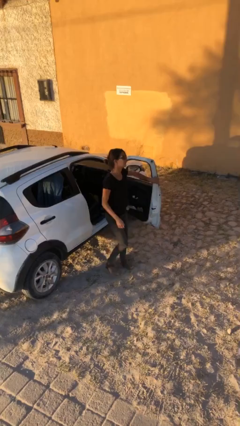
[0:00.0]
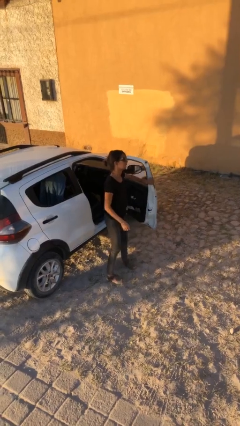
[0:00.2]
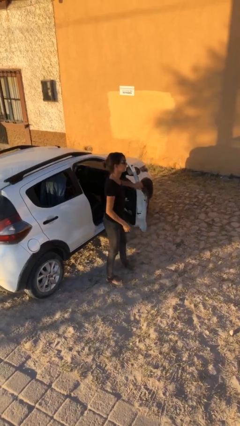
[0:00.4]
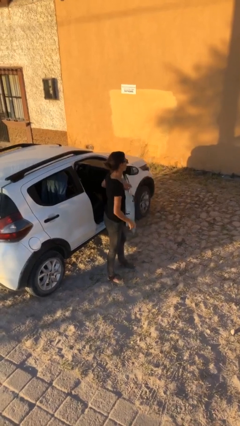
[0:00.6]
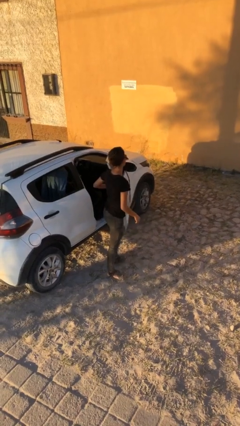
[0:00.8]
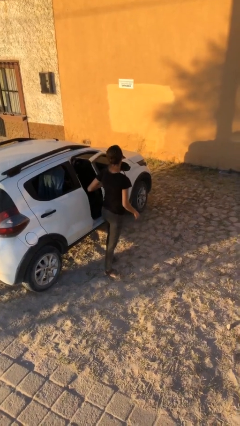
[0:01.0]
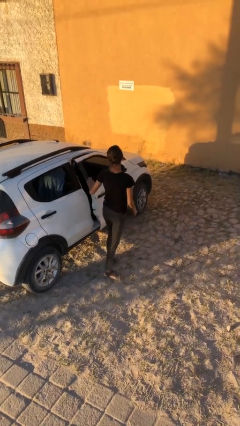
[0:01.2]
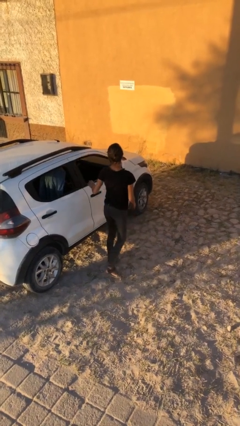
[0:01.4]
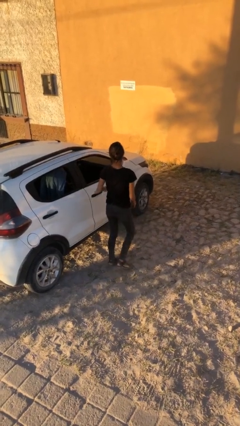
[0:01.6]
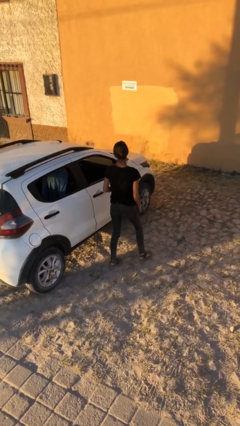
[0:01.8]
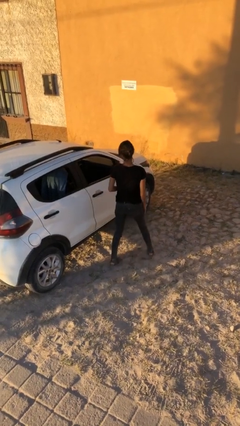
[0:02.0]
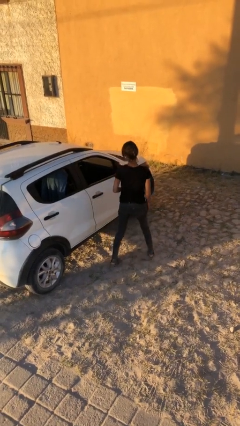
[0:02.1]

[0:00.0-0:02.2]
person closes car door

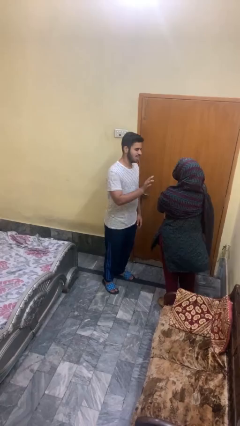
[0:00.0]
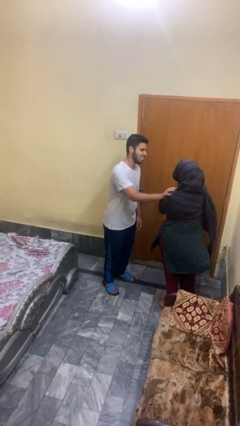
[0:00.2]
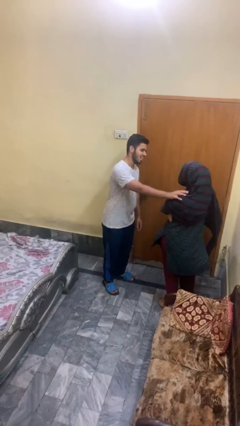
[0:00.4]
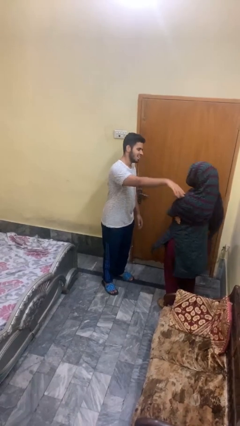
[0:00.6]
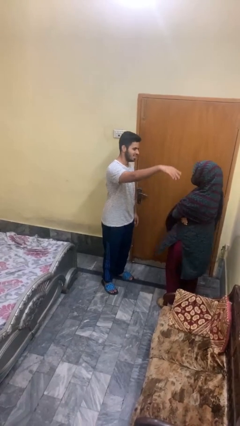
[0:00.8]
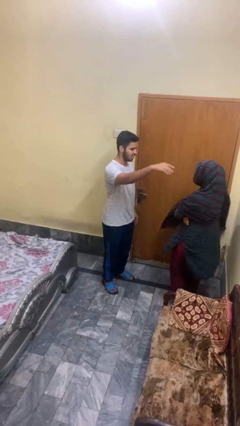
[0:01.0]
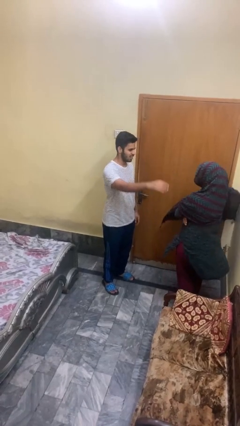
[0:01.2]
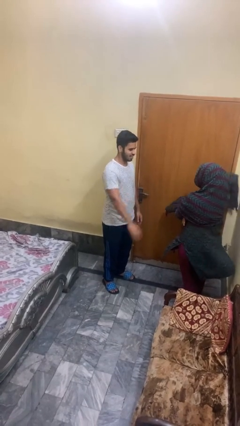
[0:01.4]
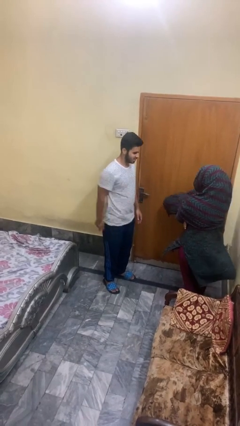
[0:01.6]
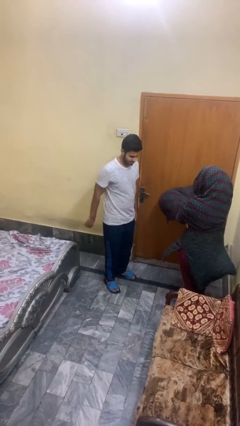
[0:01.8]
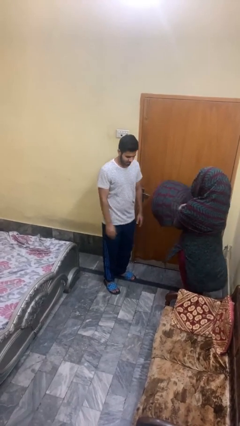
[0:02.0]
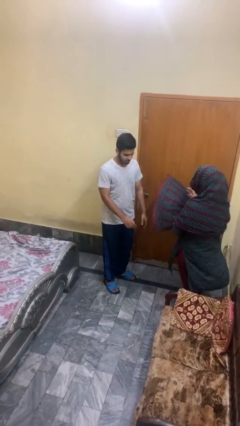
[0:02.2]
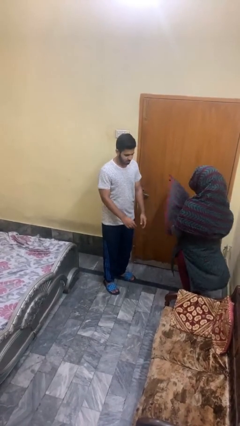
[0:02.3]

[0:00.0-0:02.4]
person shoves person

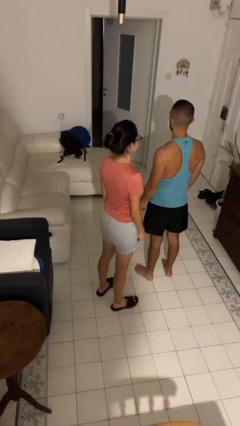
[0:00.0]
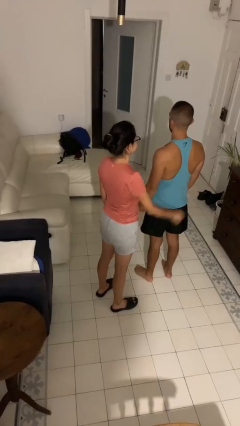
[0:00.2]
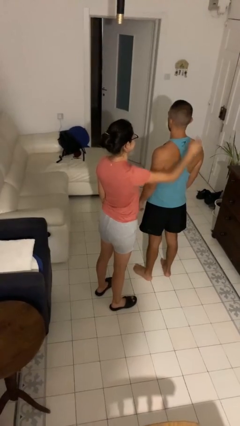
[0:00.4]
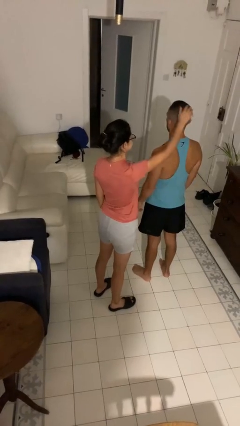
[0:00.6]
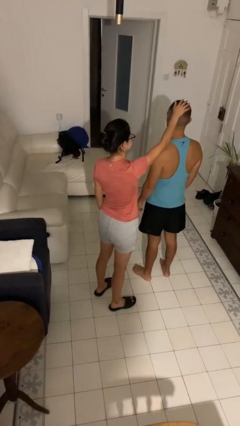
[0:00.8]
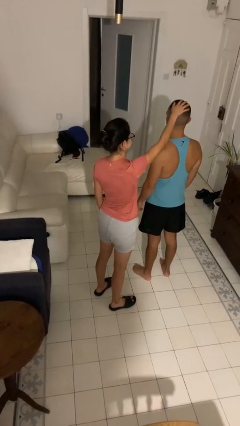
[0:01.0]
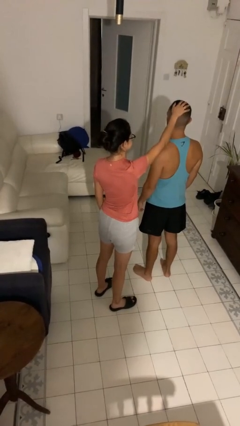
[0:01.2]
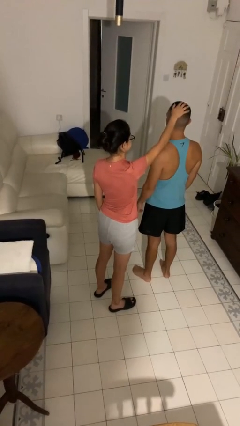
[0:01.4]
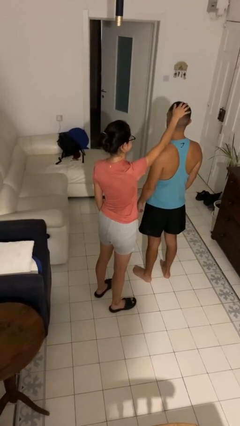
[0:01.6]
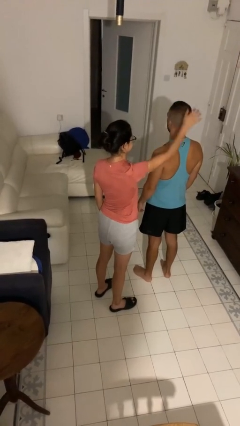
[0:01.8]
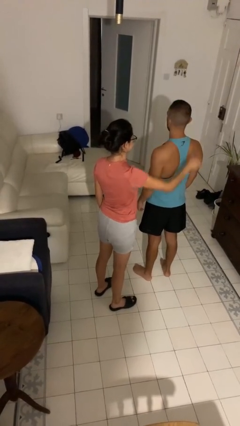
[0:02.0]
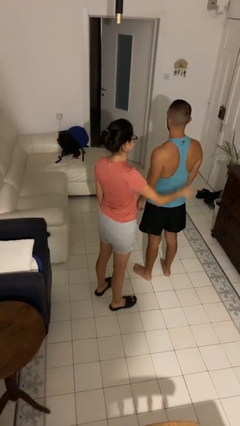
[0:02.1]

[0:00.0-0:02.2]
person grabs person by hair

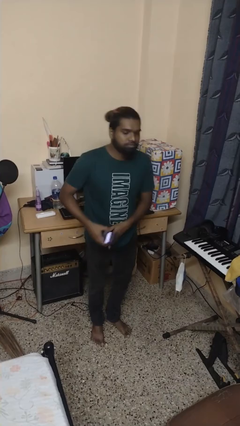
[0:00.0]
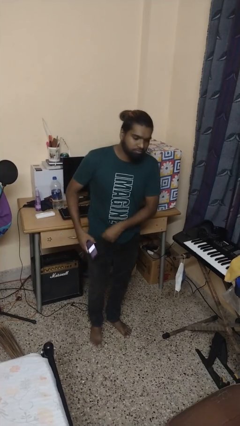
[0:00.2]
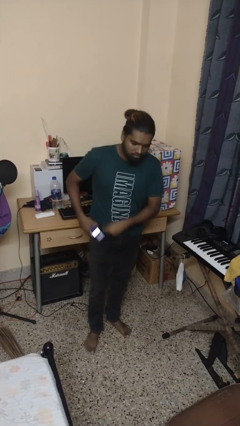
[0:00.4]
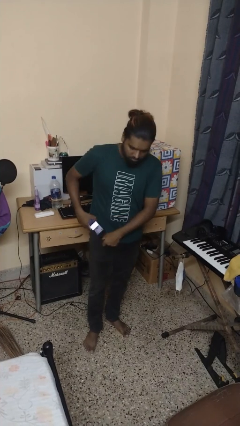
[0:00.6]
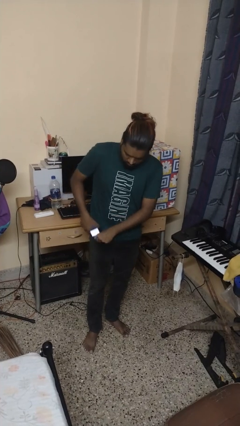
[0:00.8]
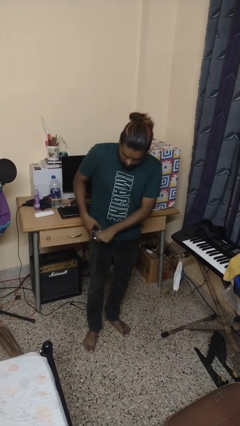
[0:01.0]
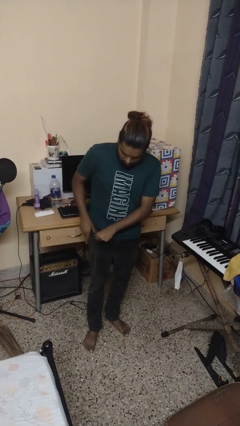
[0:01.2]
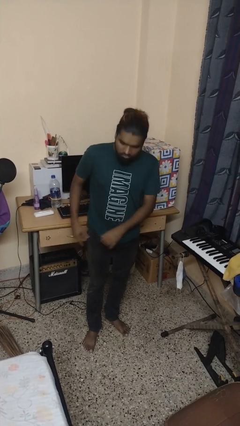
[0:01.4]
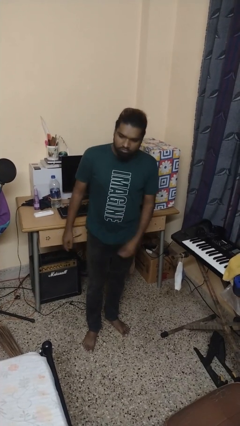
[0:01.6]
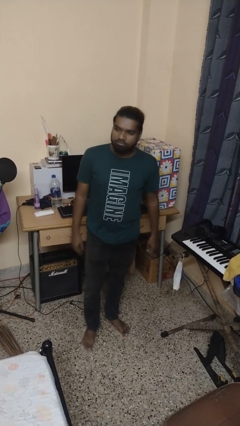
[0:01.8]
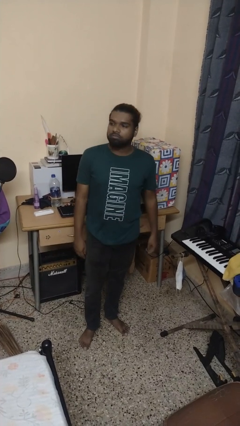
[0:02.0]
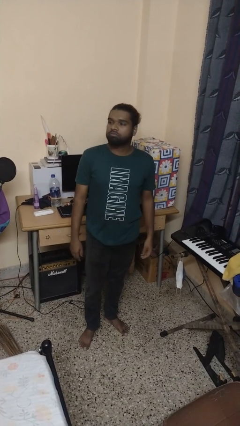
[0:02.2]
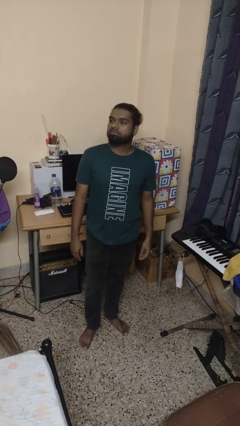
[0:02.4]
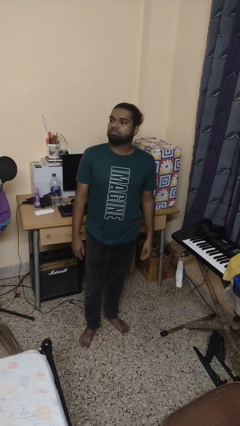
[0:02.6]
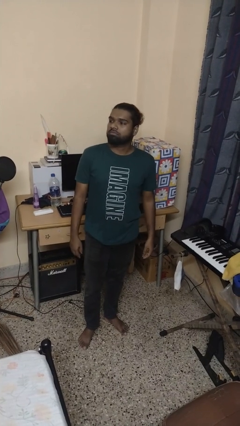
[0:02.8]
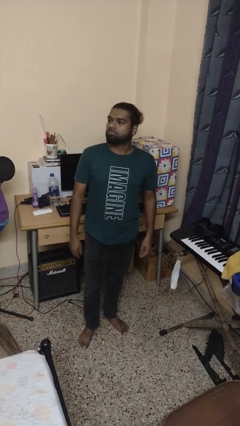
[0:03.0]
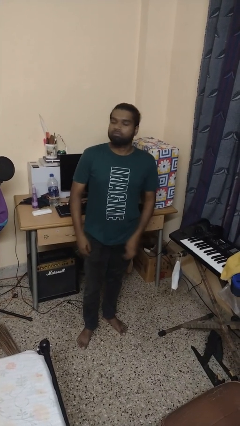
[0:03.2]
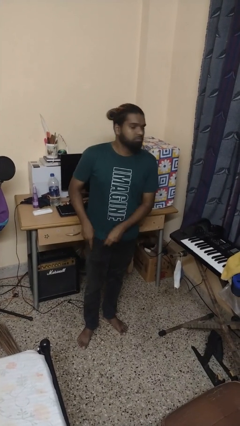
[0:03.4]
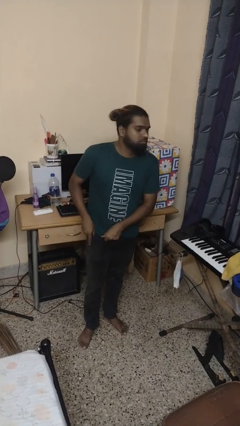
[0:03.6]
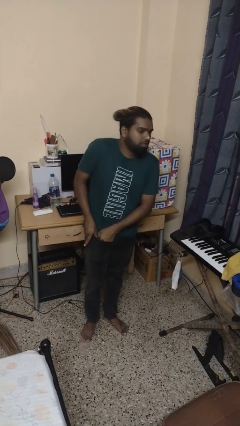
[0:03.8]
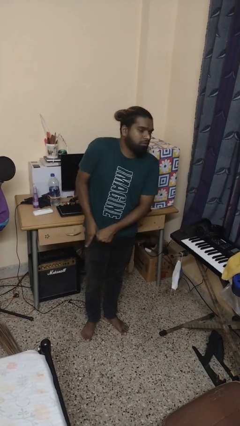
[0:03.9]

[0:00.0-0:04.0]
person puts phone into pocket

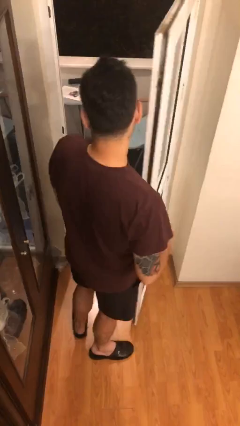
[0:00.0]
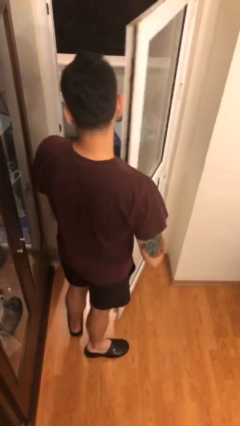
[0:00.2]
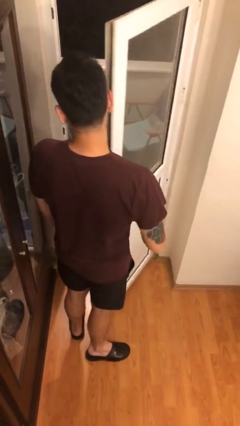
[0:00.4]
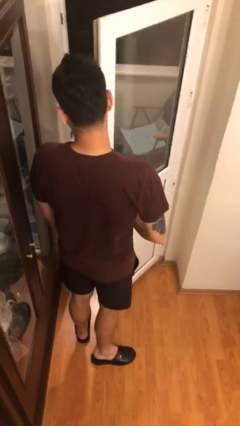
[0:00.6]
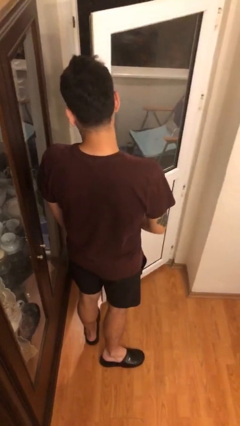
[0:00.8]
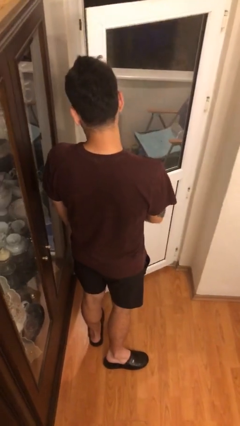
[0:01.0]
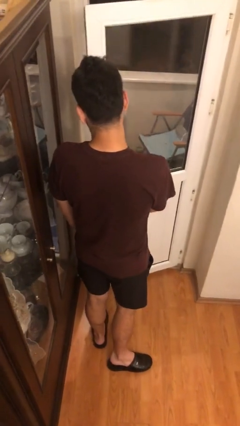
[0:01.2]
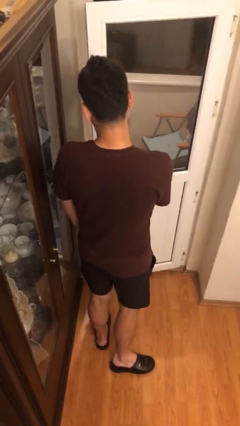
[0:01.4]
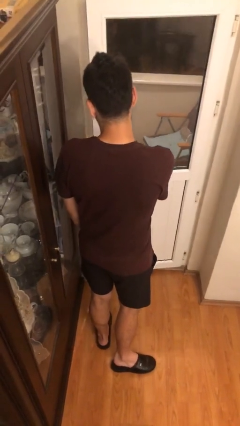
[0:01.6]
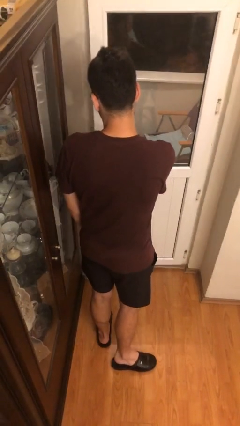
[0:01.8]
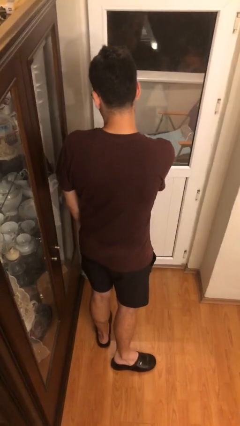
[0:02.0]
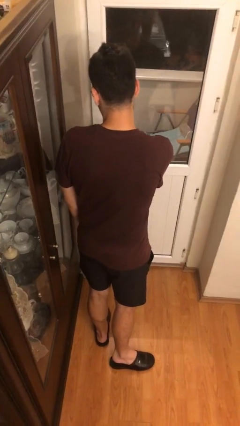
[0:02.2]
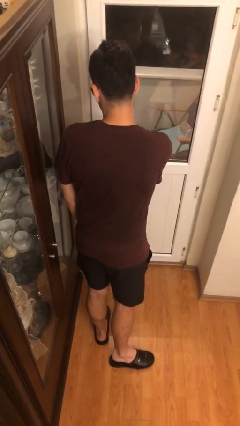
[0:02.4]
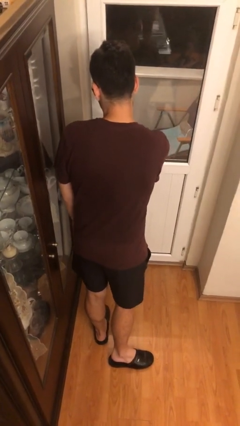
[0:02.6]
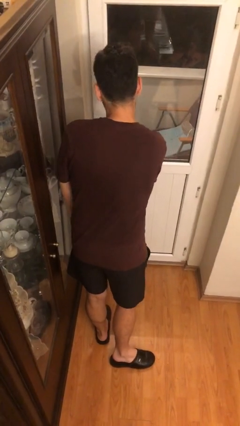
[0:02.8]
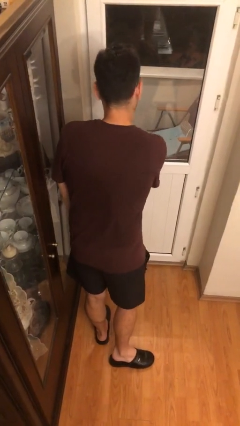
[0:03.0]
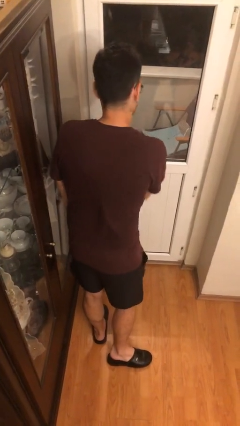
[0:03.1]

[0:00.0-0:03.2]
person closes facility door

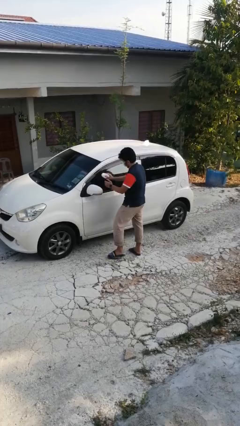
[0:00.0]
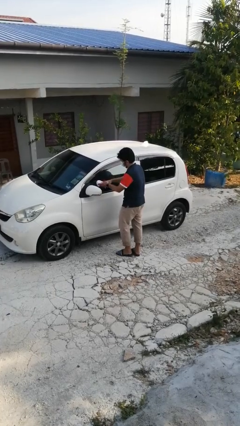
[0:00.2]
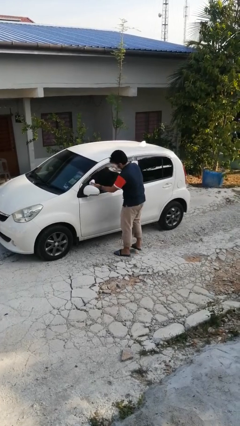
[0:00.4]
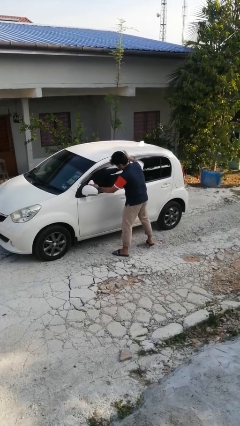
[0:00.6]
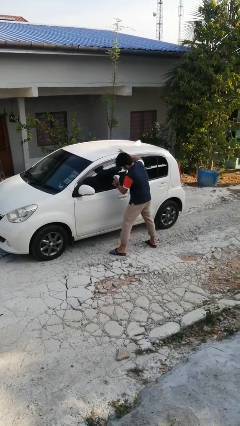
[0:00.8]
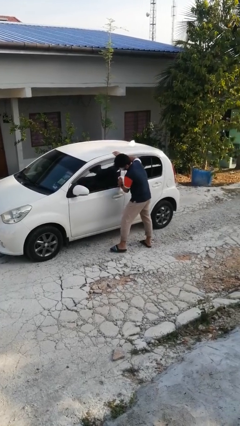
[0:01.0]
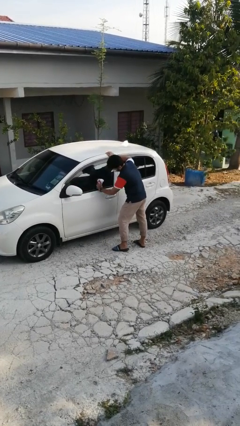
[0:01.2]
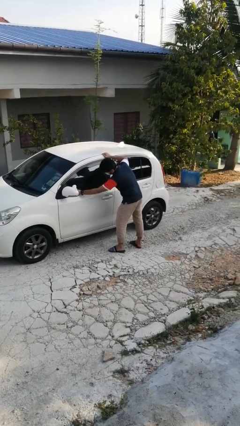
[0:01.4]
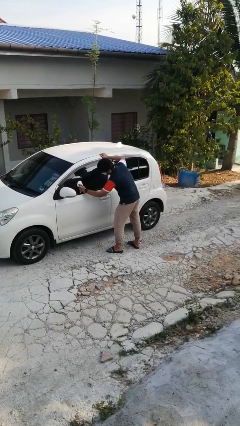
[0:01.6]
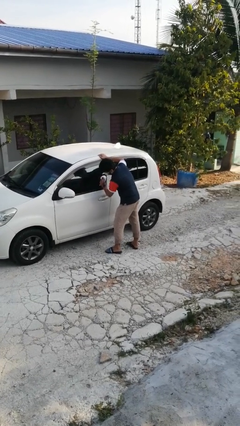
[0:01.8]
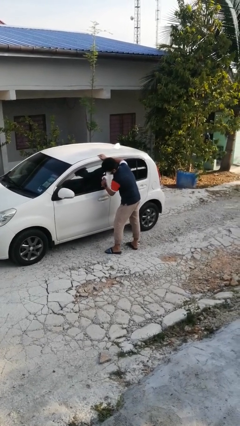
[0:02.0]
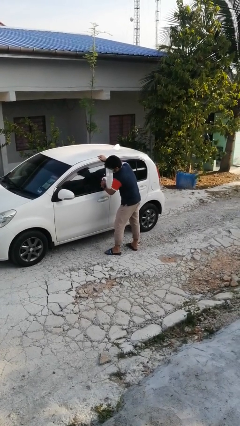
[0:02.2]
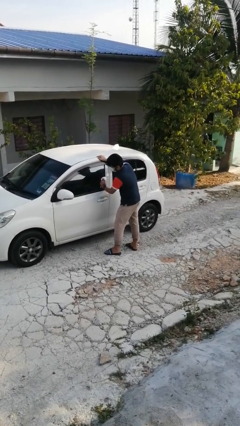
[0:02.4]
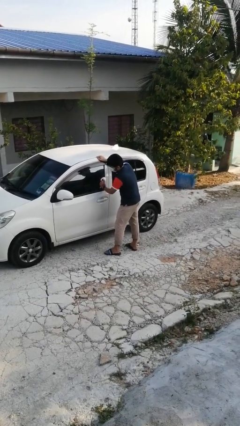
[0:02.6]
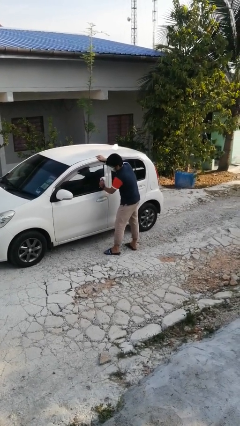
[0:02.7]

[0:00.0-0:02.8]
person polishes car with rag

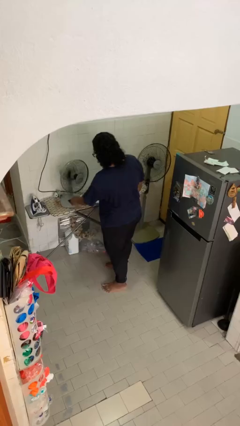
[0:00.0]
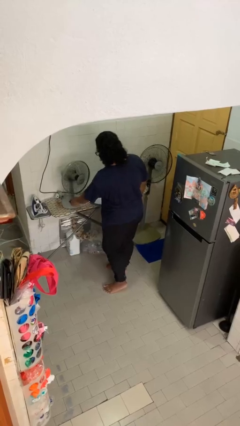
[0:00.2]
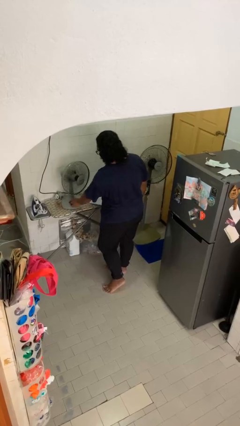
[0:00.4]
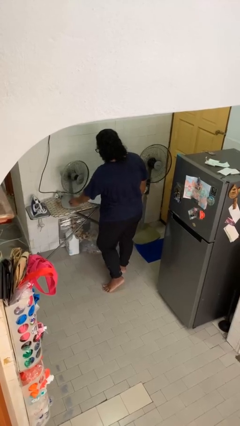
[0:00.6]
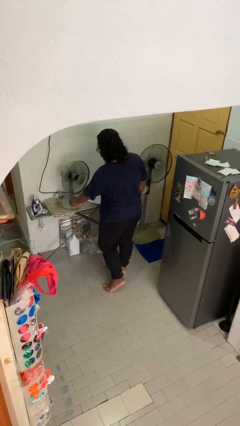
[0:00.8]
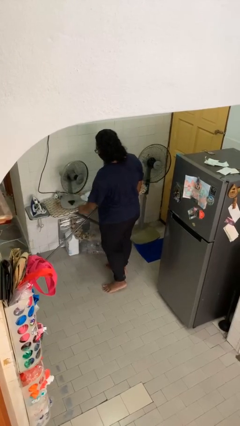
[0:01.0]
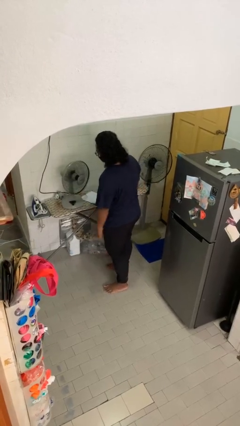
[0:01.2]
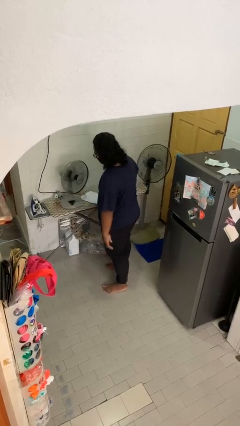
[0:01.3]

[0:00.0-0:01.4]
person turns off fan
